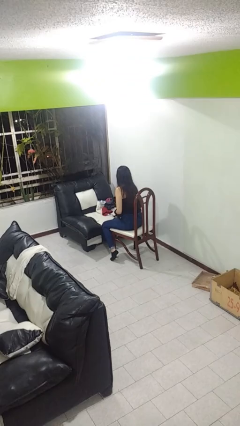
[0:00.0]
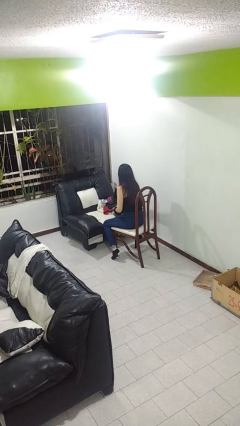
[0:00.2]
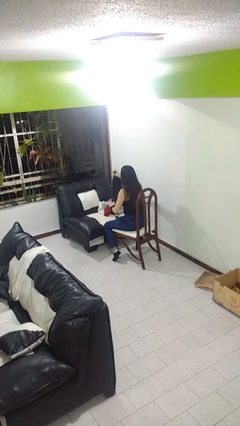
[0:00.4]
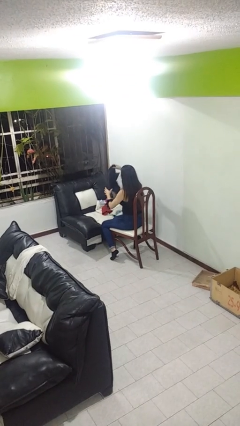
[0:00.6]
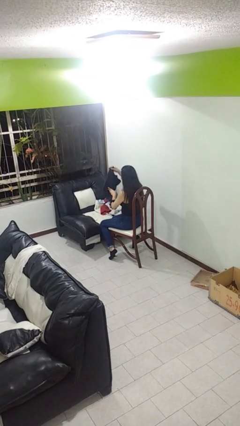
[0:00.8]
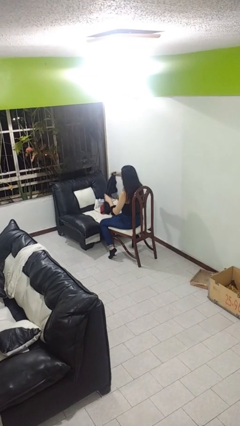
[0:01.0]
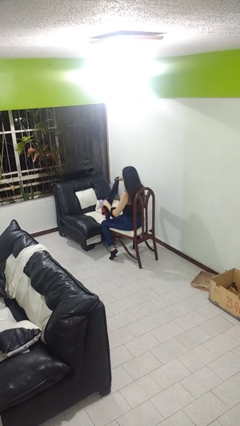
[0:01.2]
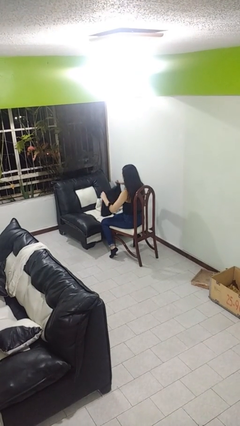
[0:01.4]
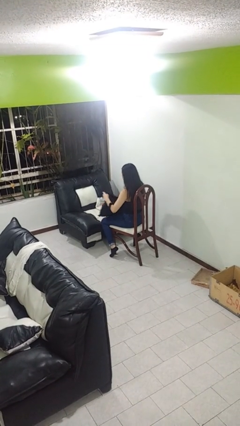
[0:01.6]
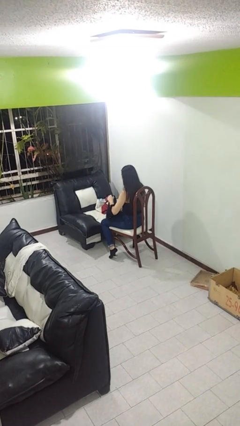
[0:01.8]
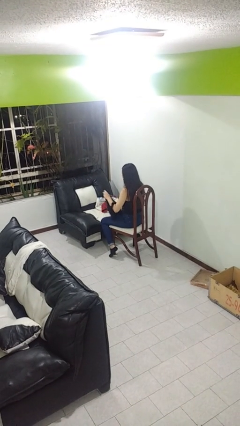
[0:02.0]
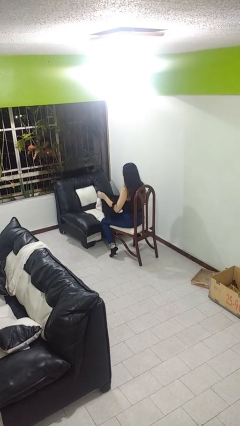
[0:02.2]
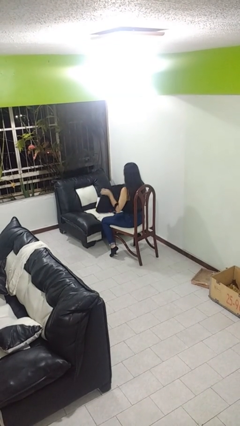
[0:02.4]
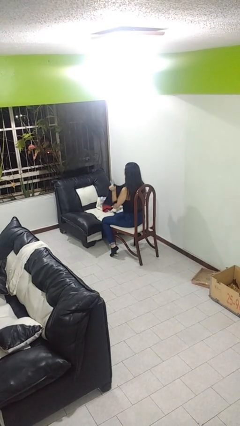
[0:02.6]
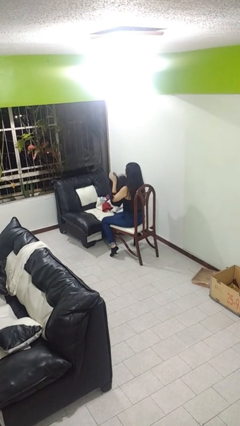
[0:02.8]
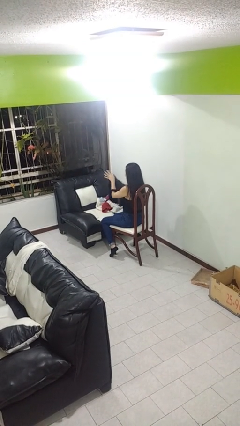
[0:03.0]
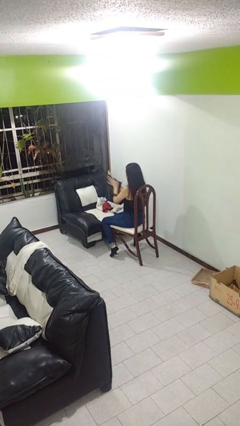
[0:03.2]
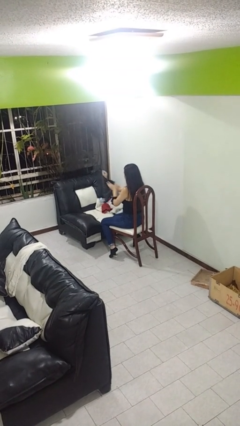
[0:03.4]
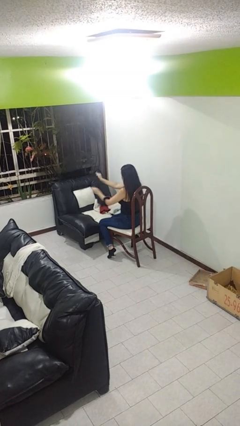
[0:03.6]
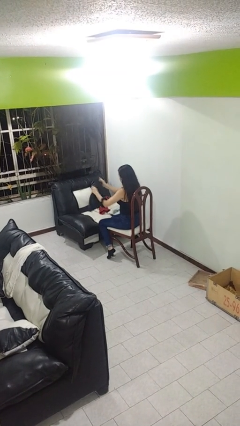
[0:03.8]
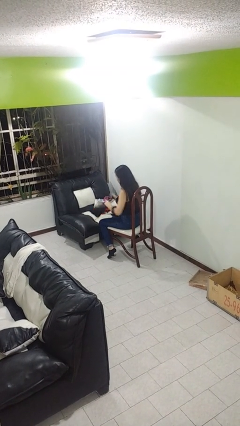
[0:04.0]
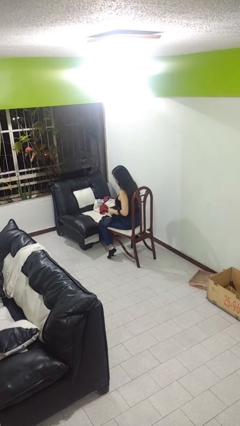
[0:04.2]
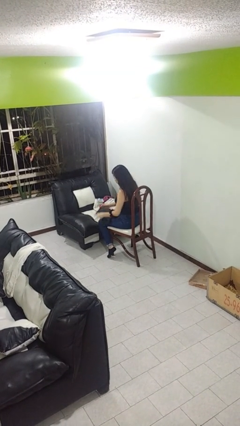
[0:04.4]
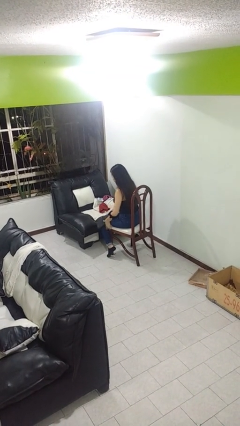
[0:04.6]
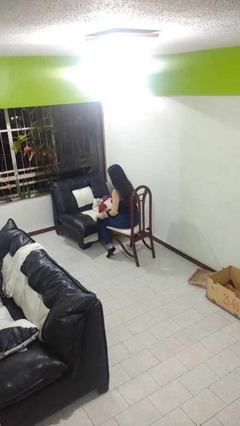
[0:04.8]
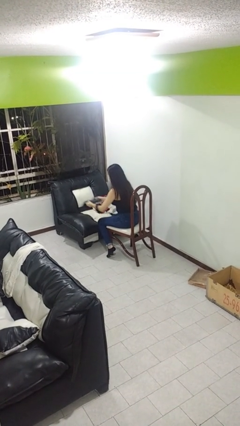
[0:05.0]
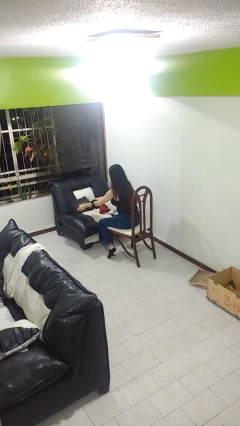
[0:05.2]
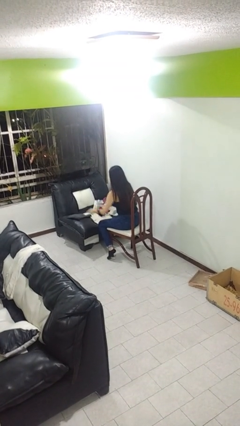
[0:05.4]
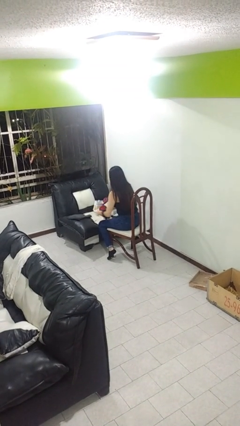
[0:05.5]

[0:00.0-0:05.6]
person folds towel

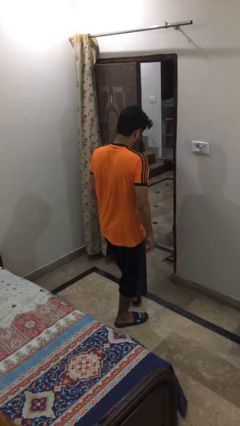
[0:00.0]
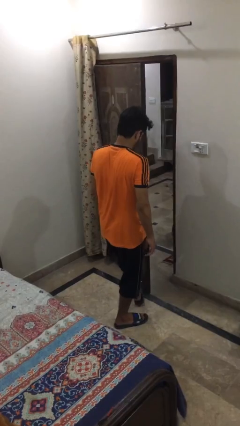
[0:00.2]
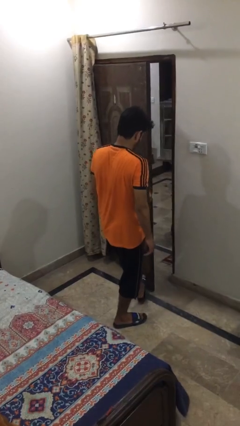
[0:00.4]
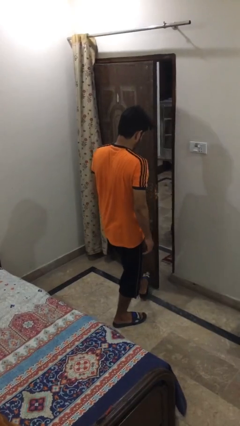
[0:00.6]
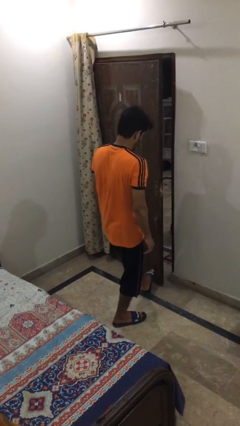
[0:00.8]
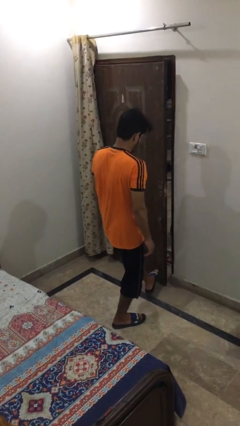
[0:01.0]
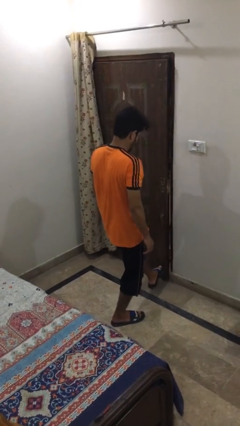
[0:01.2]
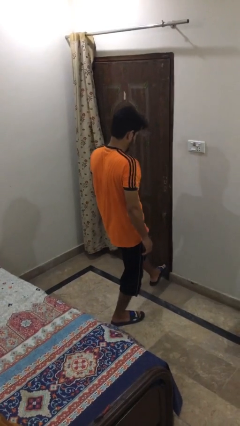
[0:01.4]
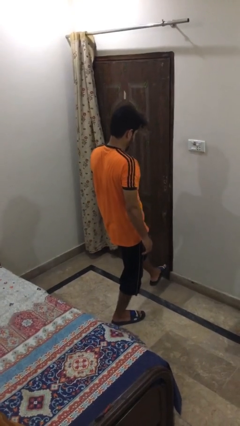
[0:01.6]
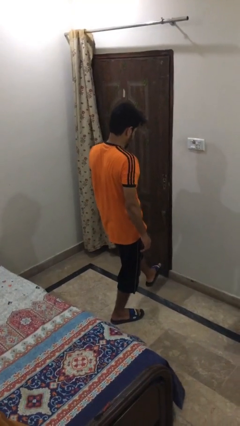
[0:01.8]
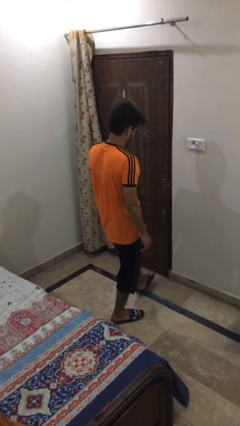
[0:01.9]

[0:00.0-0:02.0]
person closes door with foot

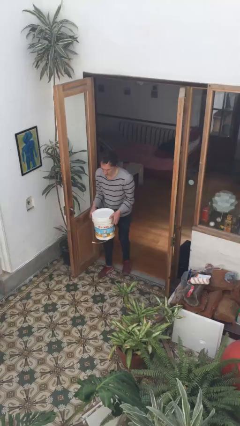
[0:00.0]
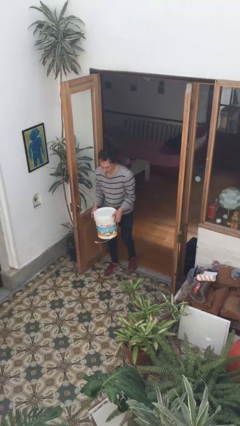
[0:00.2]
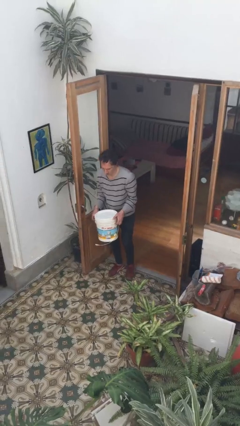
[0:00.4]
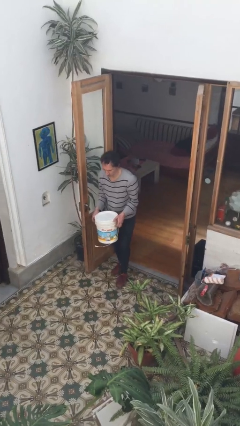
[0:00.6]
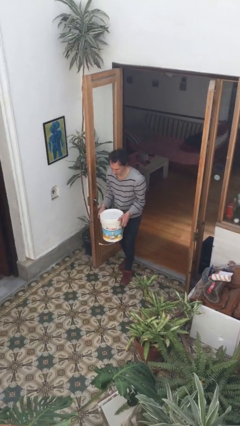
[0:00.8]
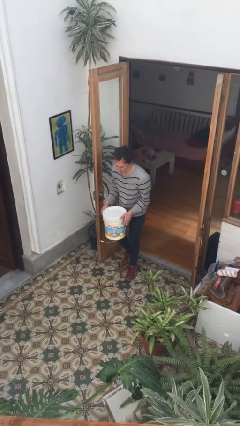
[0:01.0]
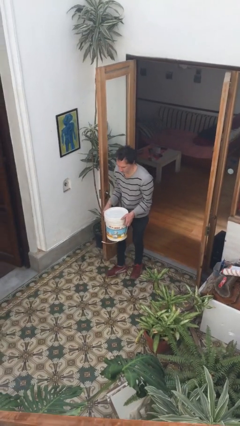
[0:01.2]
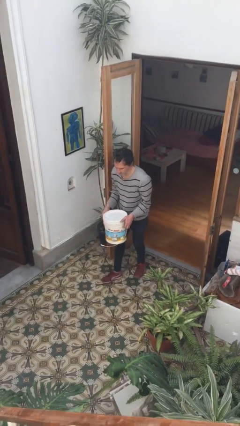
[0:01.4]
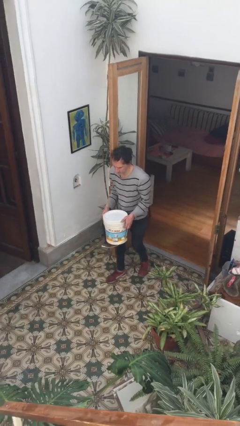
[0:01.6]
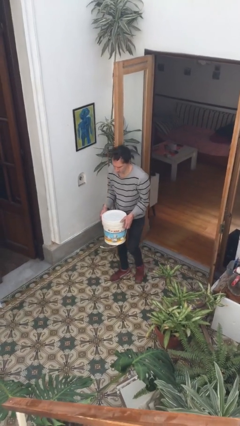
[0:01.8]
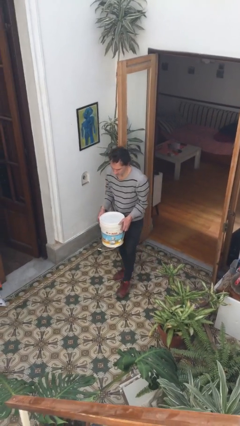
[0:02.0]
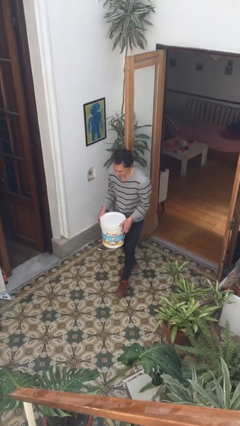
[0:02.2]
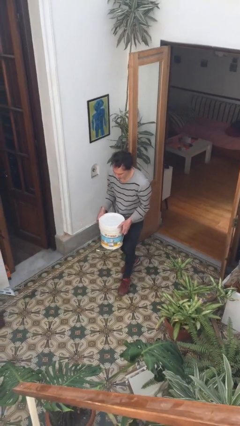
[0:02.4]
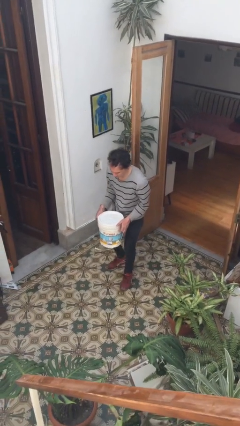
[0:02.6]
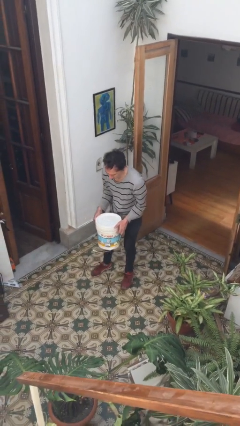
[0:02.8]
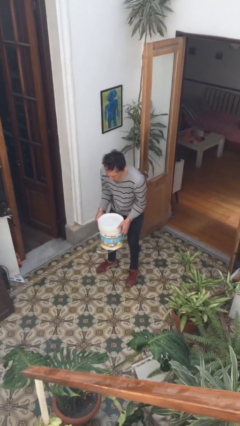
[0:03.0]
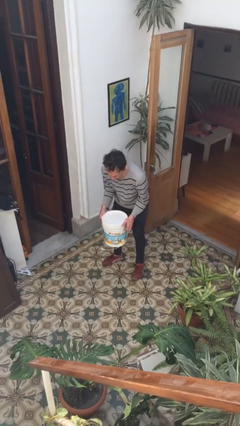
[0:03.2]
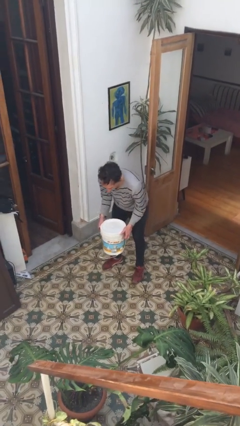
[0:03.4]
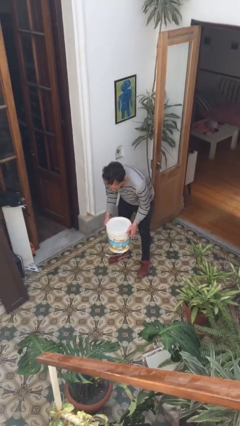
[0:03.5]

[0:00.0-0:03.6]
person carries heavy object

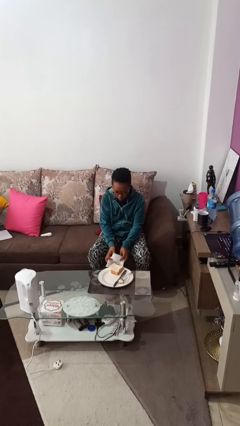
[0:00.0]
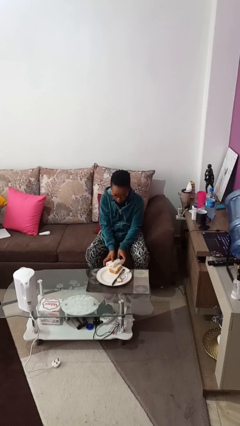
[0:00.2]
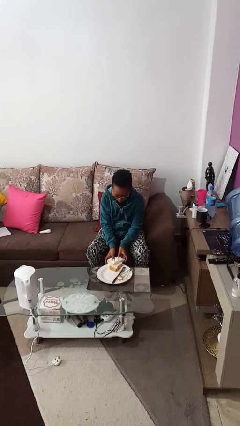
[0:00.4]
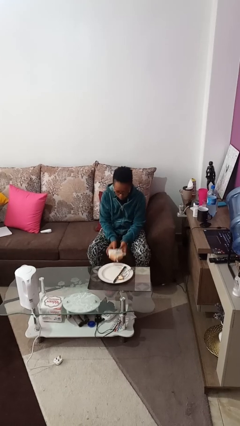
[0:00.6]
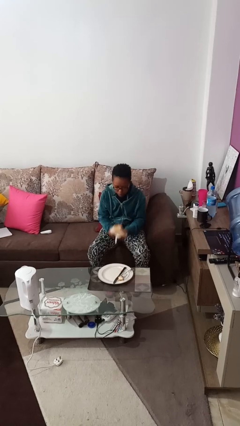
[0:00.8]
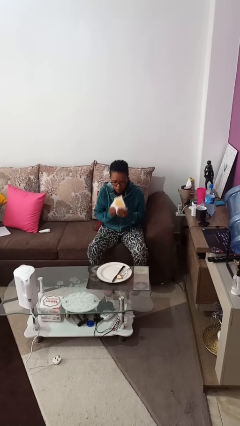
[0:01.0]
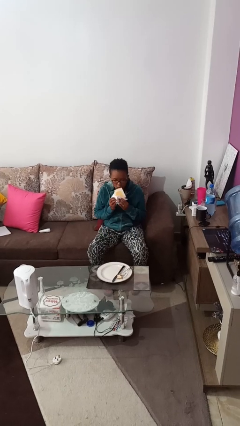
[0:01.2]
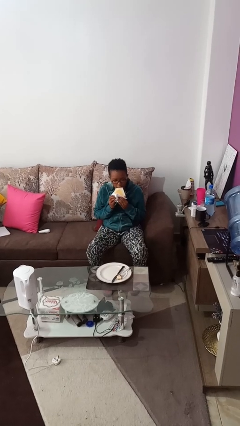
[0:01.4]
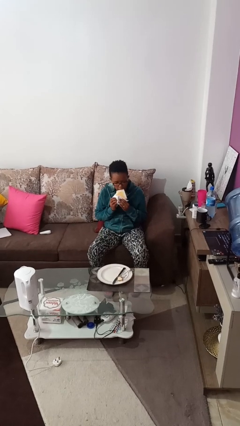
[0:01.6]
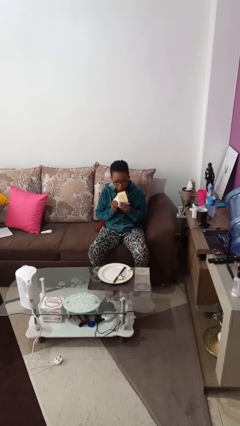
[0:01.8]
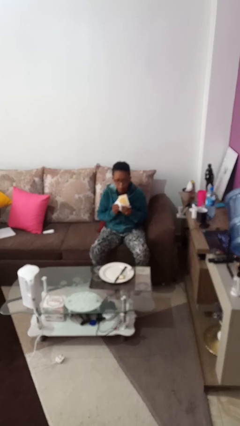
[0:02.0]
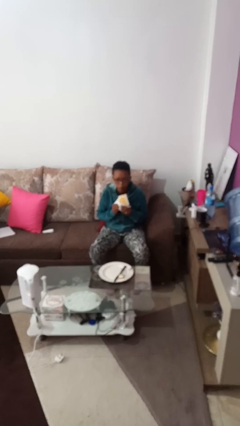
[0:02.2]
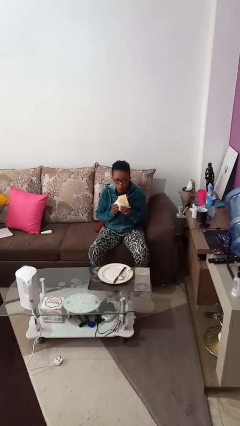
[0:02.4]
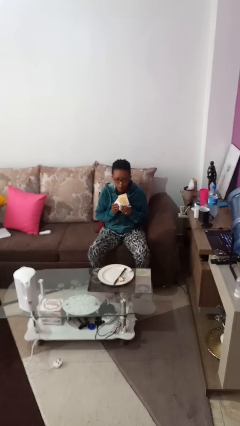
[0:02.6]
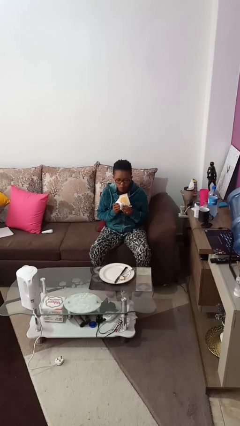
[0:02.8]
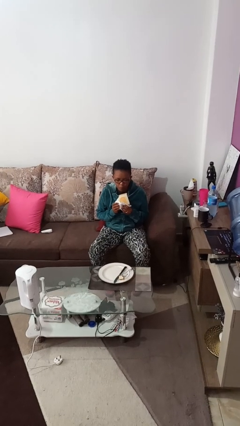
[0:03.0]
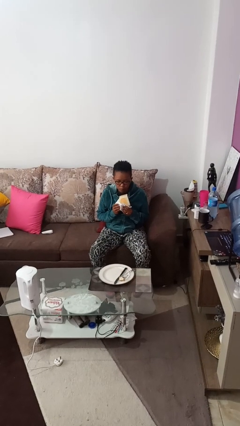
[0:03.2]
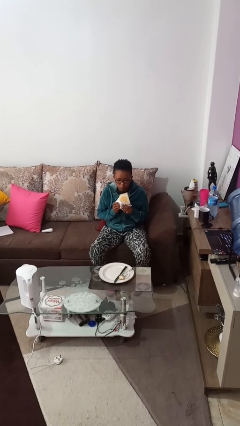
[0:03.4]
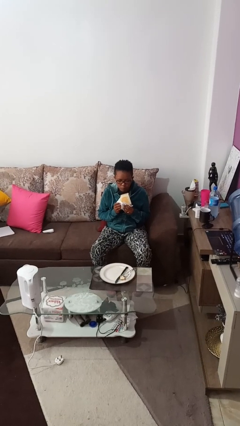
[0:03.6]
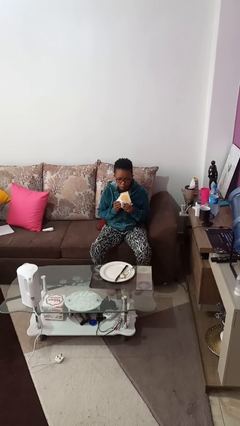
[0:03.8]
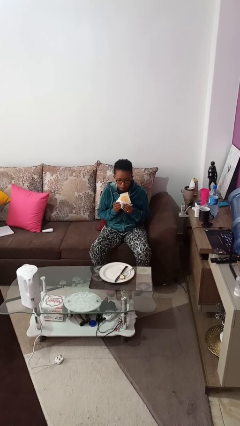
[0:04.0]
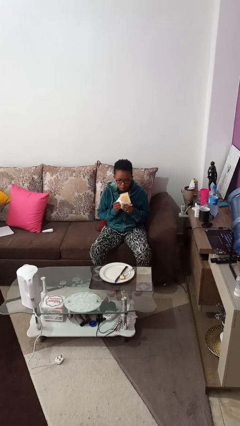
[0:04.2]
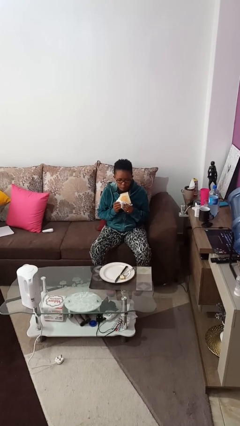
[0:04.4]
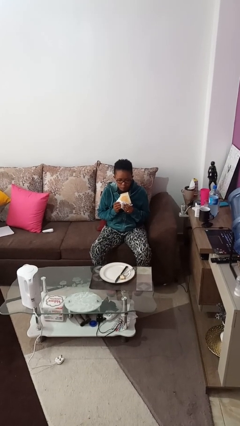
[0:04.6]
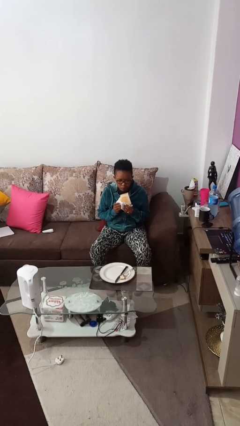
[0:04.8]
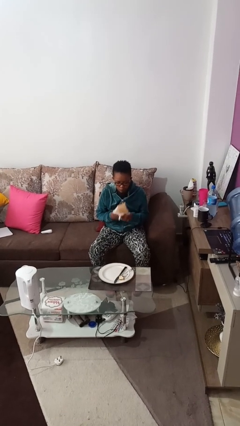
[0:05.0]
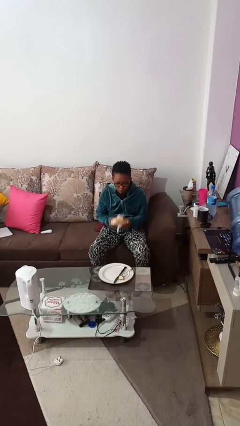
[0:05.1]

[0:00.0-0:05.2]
person eats with hands

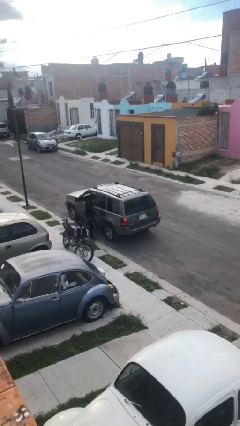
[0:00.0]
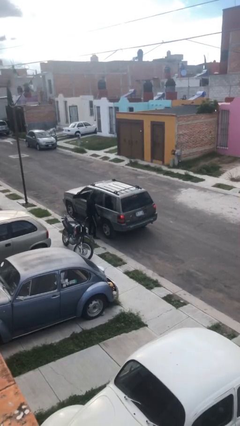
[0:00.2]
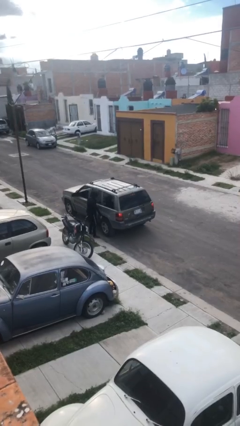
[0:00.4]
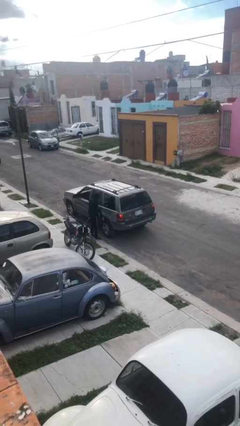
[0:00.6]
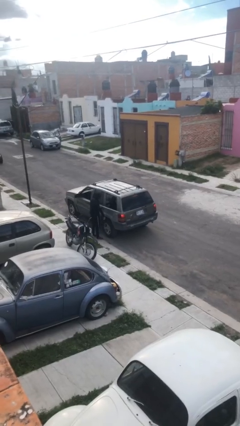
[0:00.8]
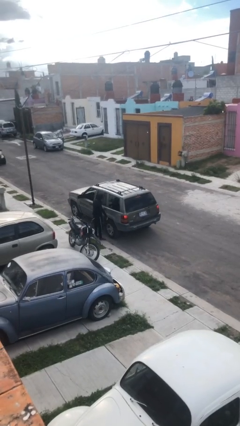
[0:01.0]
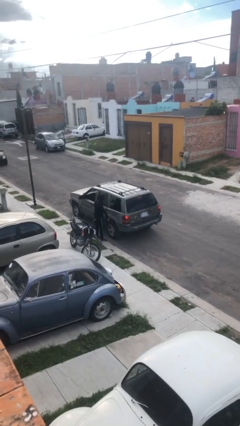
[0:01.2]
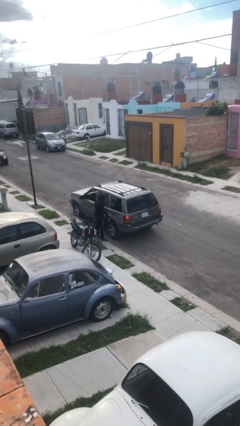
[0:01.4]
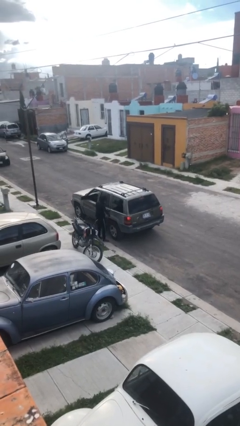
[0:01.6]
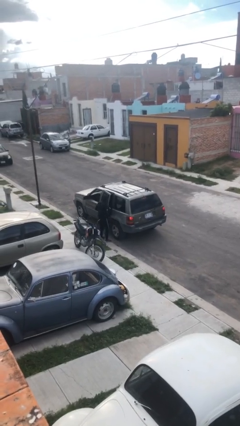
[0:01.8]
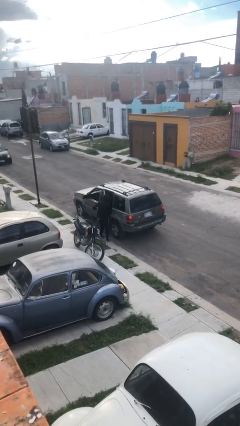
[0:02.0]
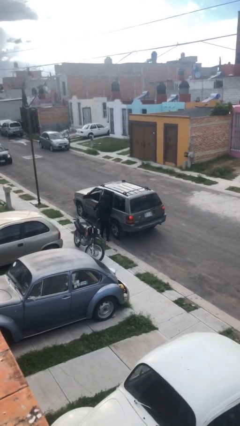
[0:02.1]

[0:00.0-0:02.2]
car picks up person
